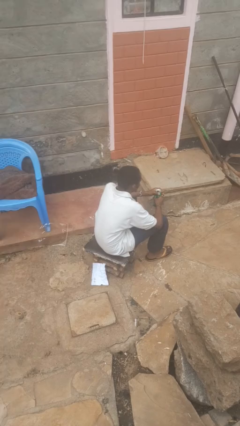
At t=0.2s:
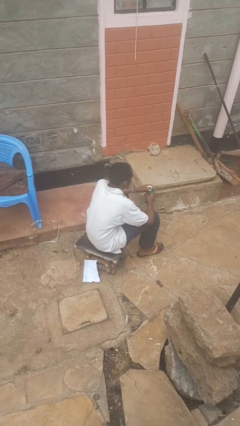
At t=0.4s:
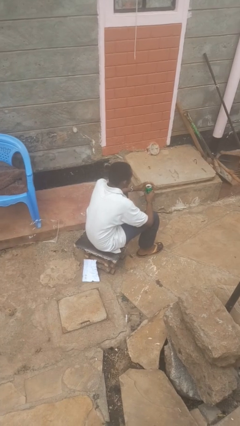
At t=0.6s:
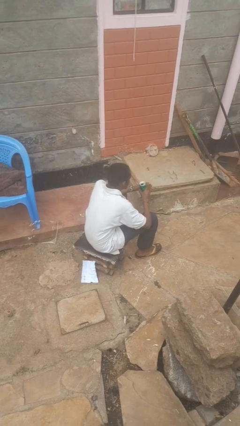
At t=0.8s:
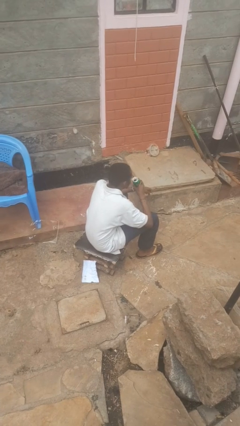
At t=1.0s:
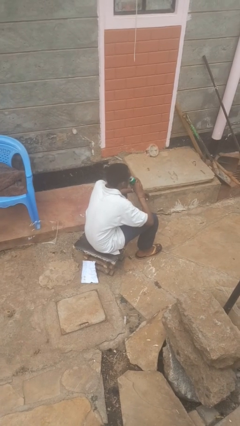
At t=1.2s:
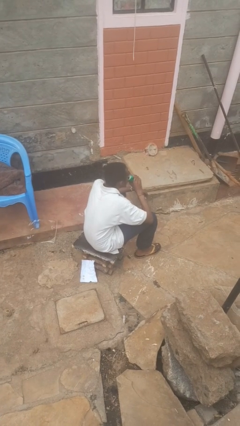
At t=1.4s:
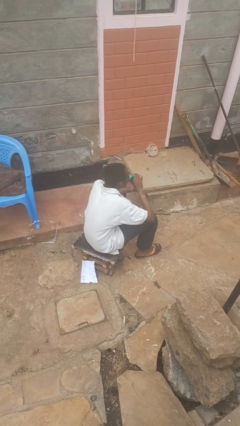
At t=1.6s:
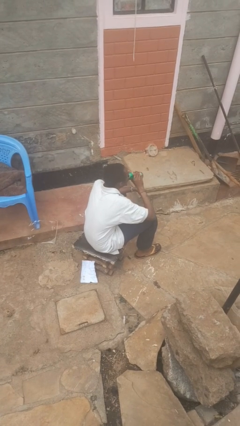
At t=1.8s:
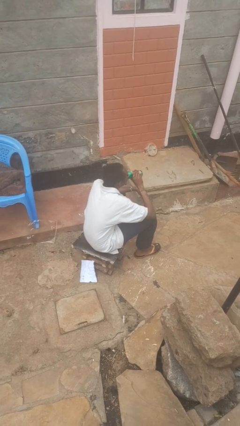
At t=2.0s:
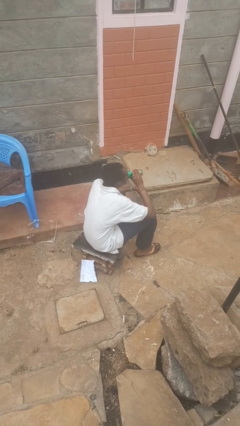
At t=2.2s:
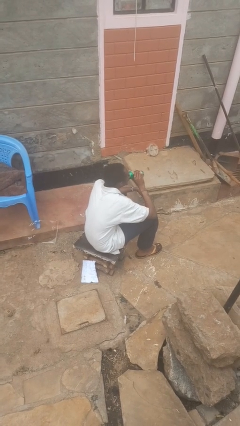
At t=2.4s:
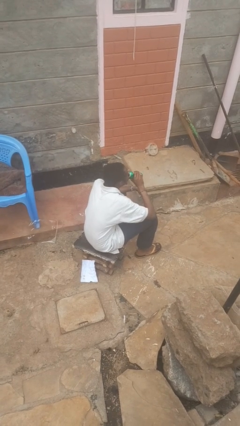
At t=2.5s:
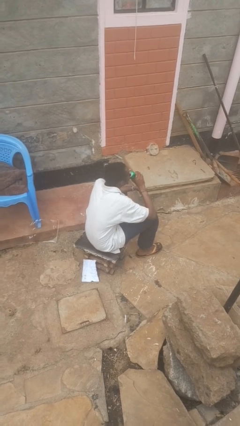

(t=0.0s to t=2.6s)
person drinks from beverage can

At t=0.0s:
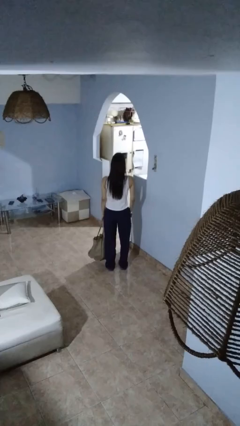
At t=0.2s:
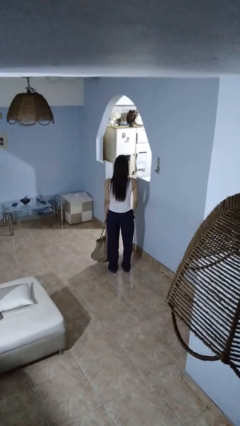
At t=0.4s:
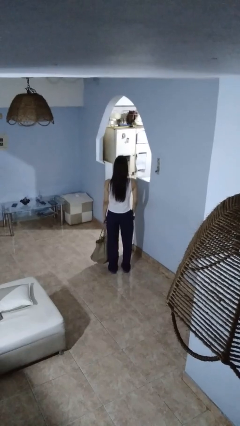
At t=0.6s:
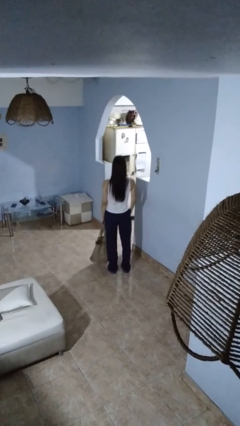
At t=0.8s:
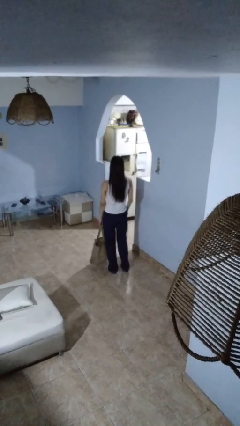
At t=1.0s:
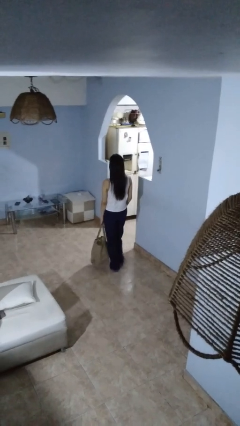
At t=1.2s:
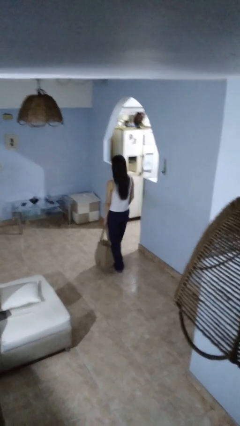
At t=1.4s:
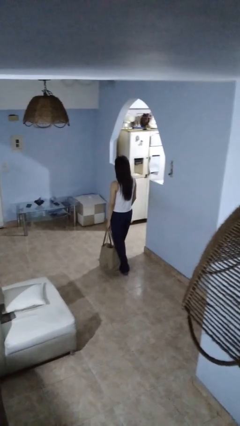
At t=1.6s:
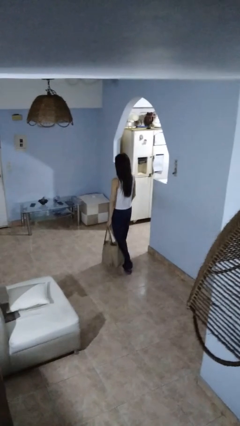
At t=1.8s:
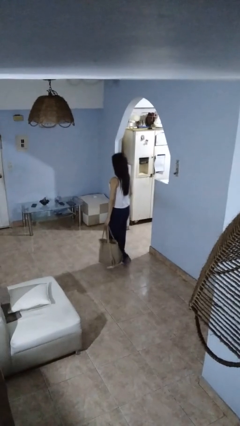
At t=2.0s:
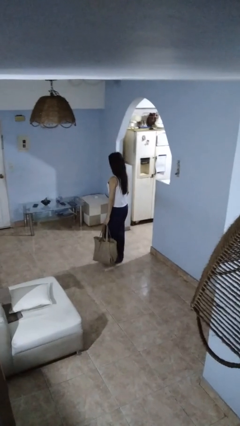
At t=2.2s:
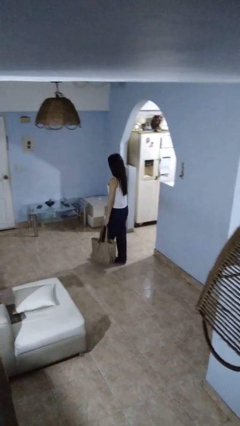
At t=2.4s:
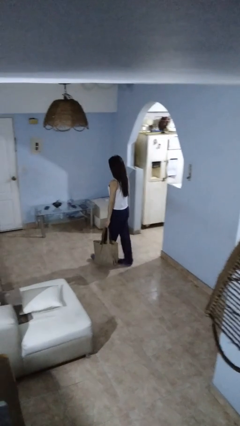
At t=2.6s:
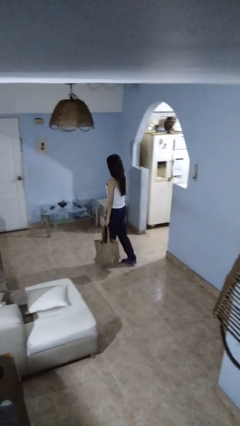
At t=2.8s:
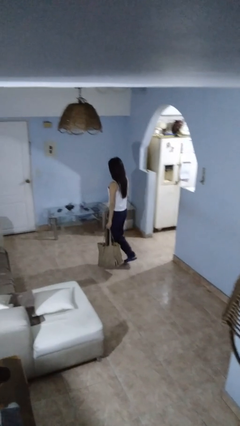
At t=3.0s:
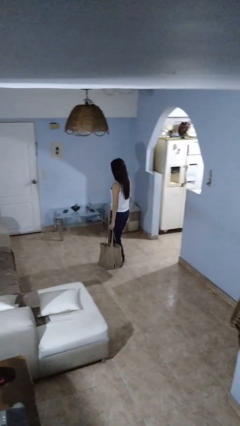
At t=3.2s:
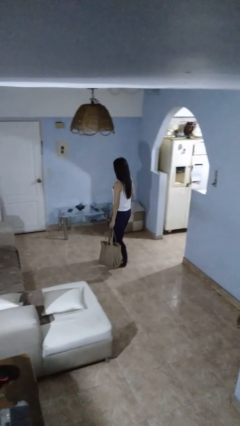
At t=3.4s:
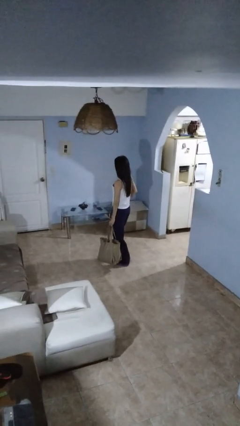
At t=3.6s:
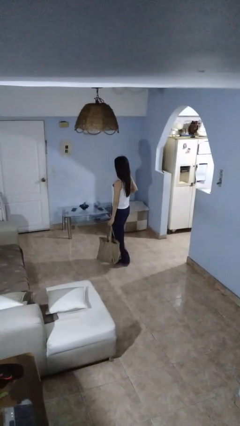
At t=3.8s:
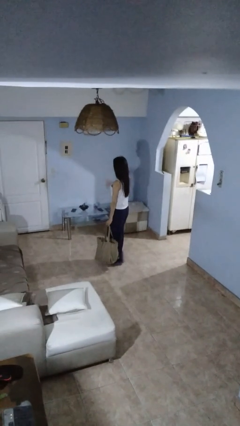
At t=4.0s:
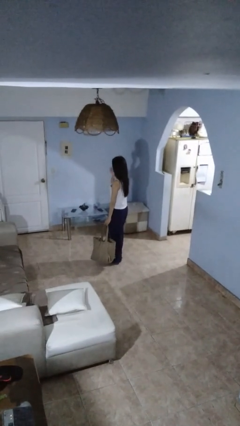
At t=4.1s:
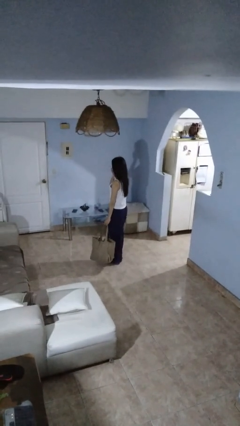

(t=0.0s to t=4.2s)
person carries groceries

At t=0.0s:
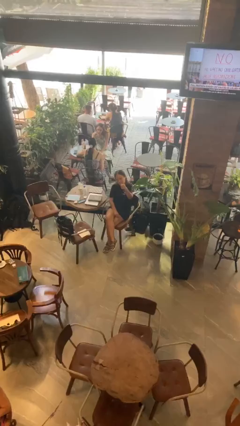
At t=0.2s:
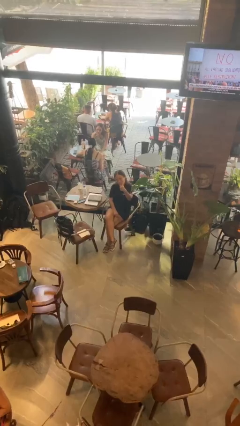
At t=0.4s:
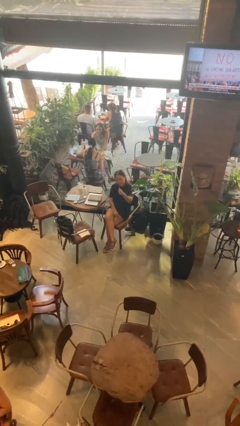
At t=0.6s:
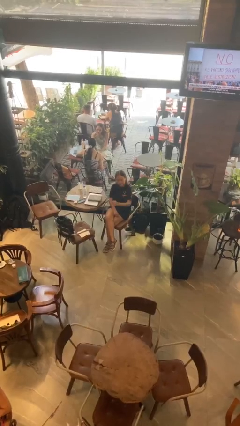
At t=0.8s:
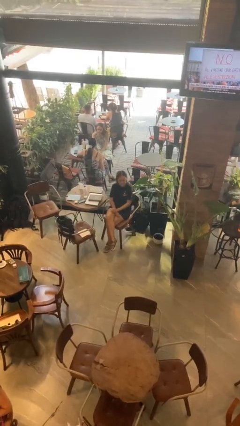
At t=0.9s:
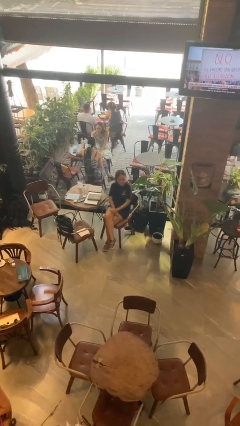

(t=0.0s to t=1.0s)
person gestures thumbs up

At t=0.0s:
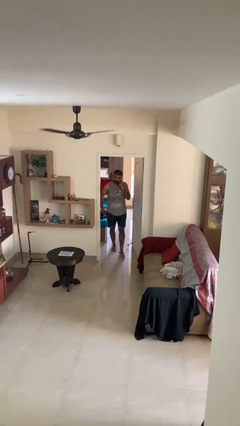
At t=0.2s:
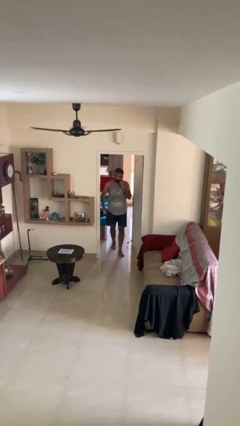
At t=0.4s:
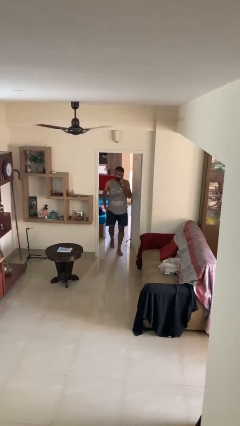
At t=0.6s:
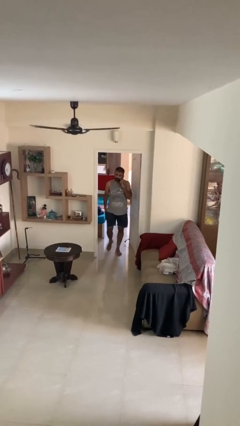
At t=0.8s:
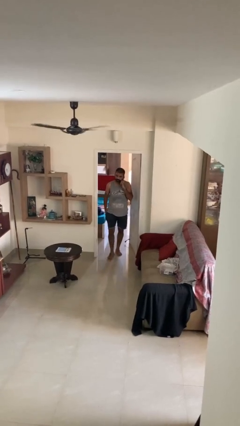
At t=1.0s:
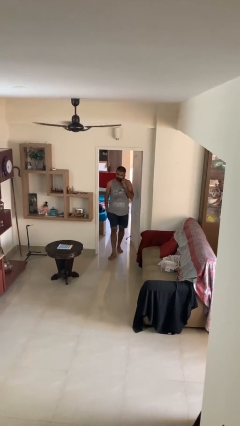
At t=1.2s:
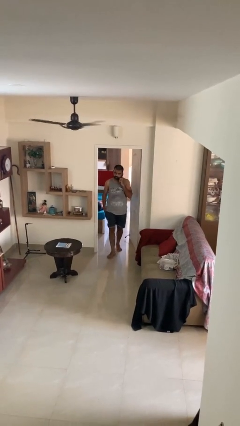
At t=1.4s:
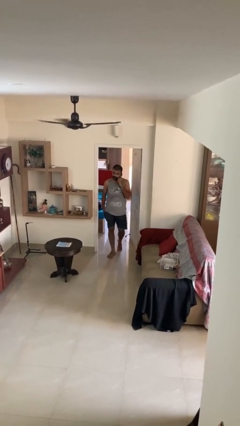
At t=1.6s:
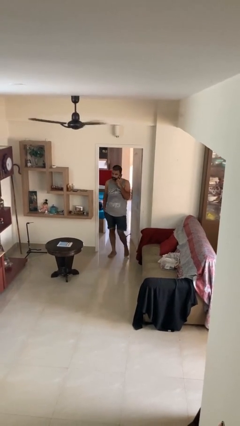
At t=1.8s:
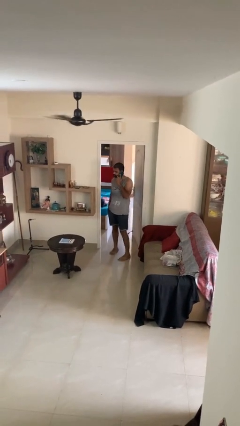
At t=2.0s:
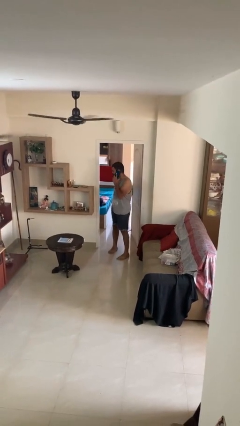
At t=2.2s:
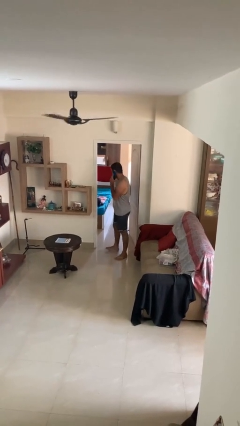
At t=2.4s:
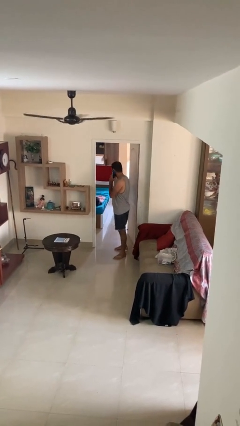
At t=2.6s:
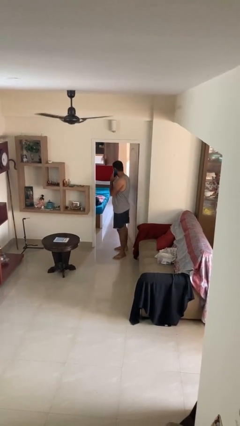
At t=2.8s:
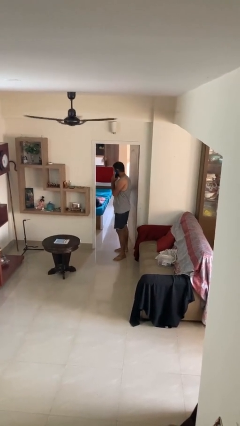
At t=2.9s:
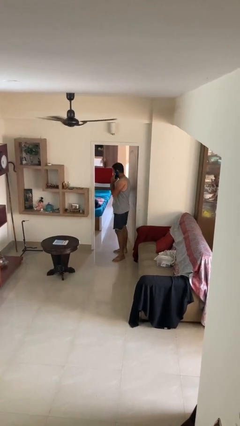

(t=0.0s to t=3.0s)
person enters scene through structure

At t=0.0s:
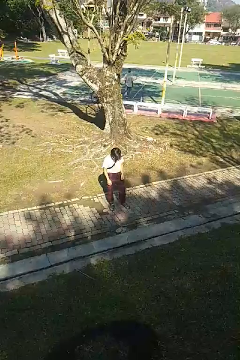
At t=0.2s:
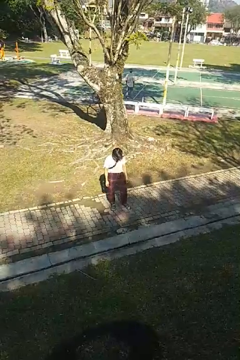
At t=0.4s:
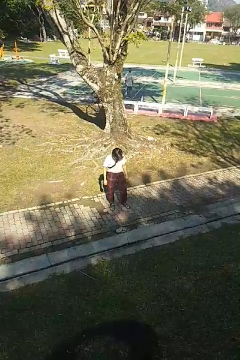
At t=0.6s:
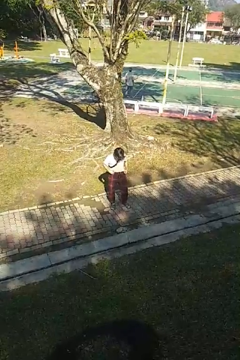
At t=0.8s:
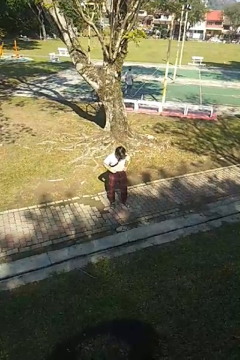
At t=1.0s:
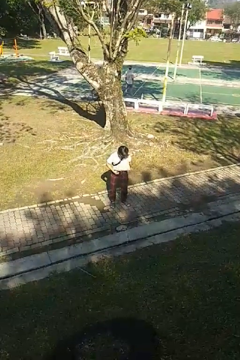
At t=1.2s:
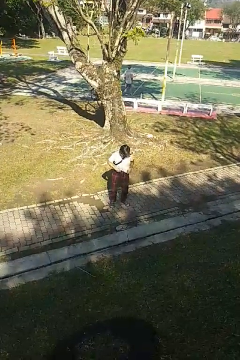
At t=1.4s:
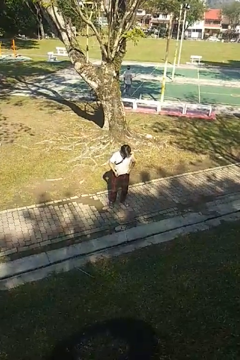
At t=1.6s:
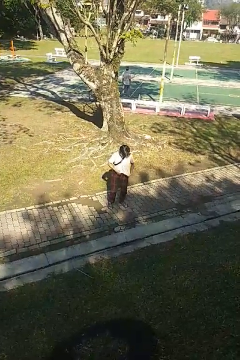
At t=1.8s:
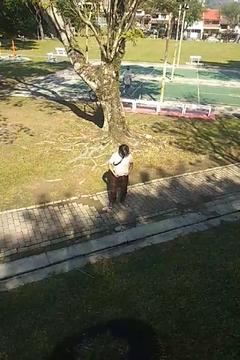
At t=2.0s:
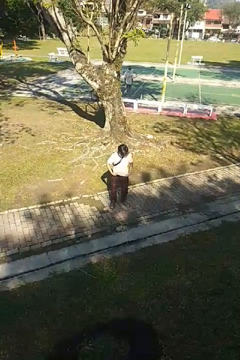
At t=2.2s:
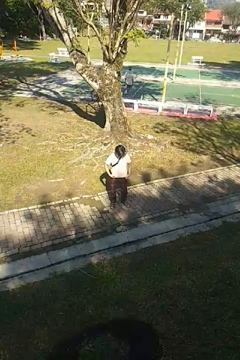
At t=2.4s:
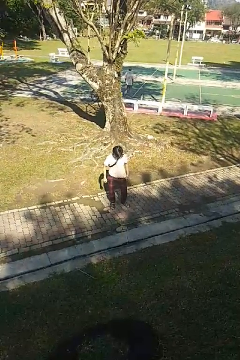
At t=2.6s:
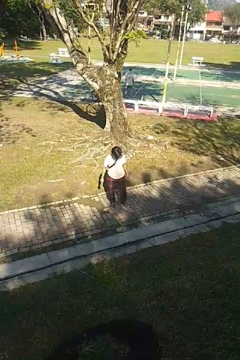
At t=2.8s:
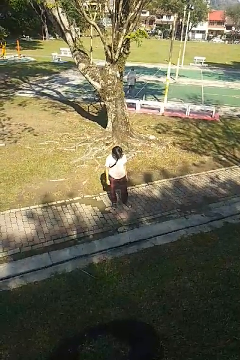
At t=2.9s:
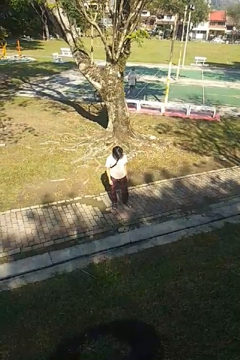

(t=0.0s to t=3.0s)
person untucks shirt

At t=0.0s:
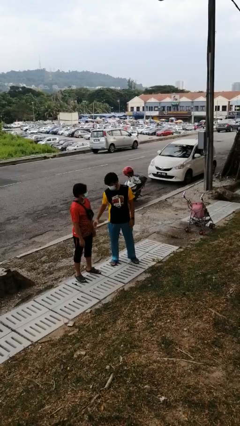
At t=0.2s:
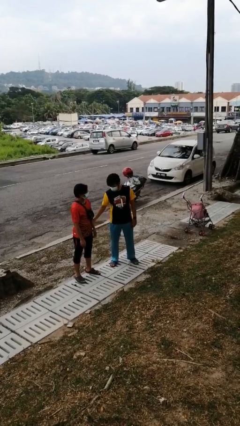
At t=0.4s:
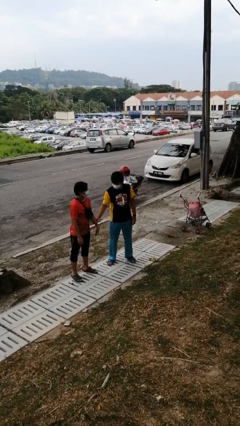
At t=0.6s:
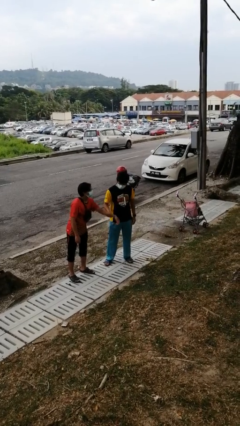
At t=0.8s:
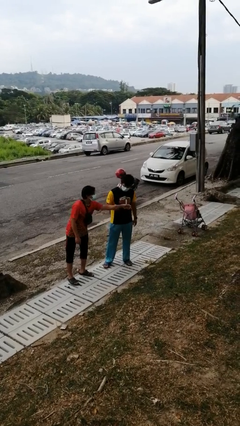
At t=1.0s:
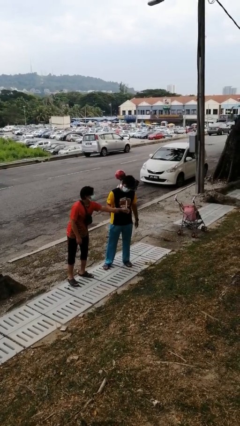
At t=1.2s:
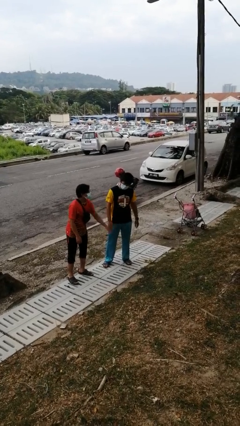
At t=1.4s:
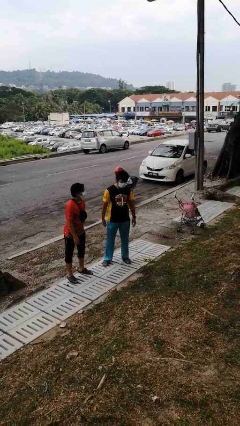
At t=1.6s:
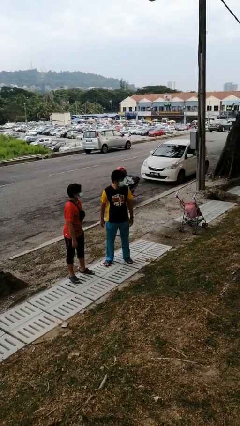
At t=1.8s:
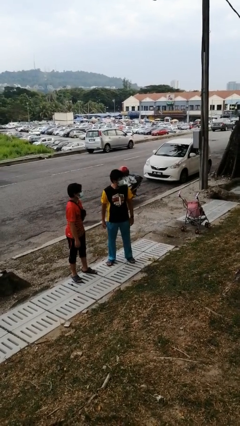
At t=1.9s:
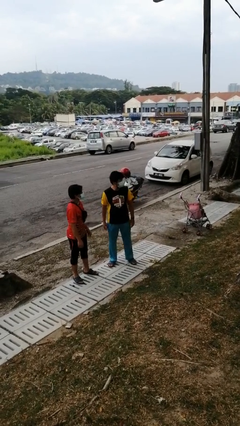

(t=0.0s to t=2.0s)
person grabs person by forearm

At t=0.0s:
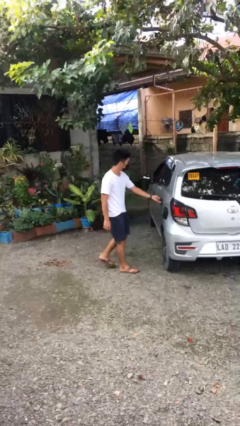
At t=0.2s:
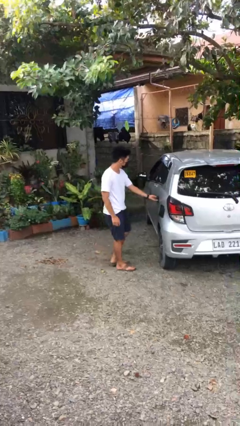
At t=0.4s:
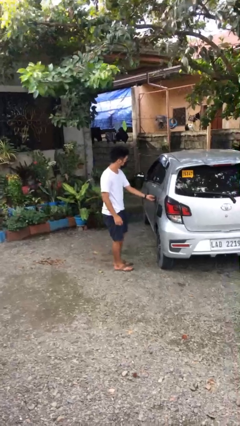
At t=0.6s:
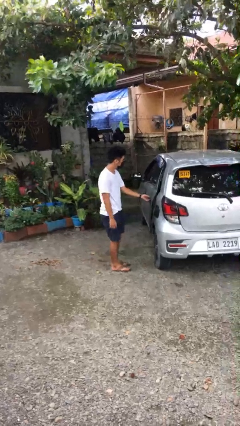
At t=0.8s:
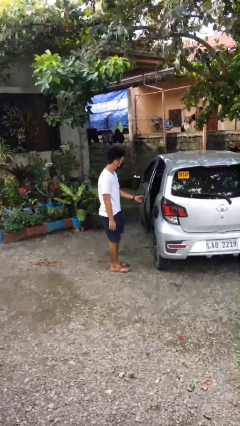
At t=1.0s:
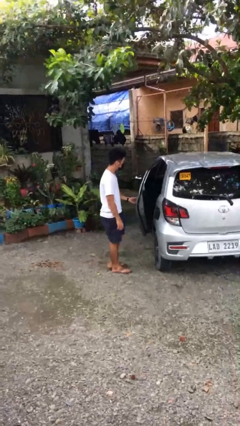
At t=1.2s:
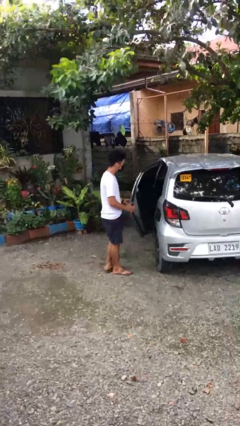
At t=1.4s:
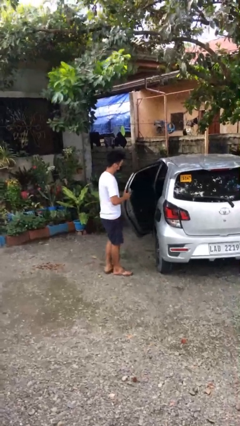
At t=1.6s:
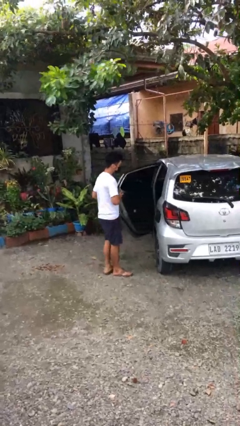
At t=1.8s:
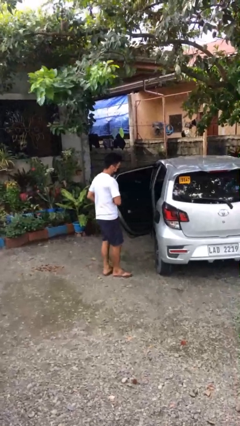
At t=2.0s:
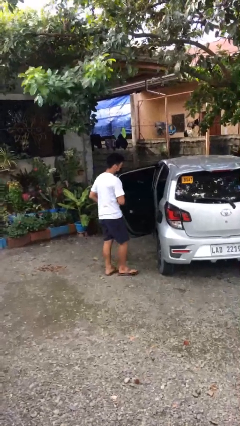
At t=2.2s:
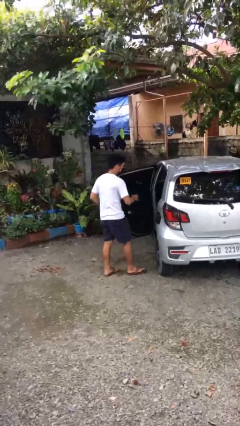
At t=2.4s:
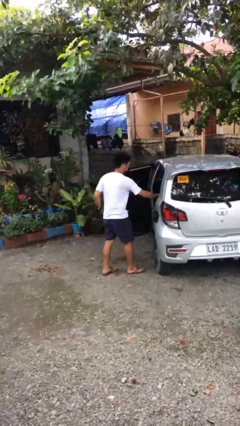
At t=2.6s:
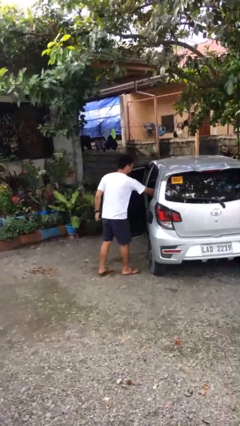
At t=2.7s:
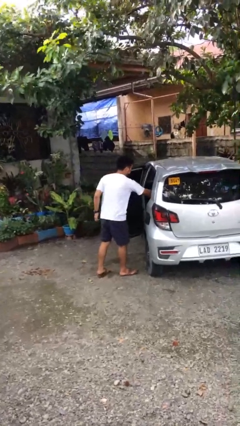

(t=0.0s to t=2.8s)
person opens car door
